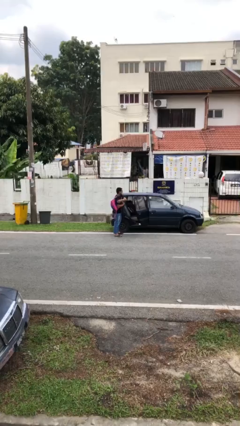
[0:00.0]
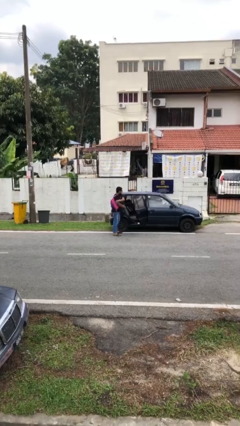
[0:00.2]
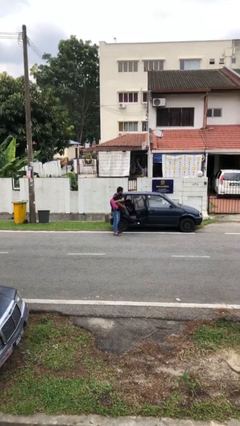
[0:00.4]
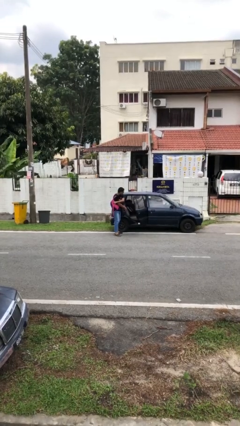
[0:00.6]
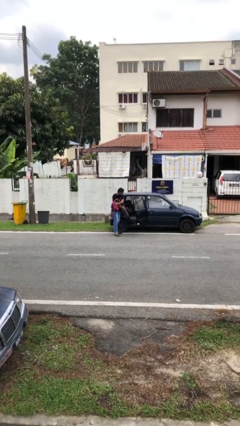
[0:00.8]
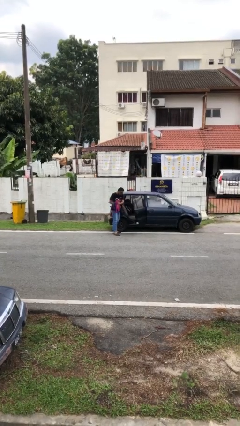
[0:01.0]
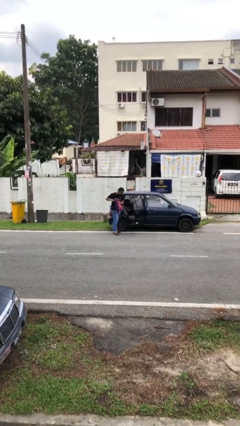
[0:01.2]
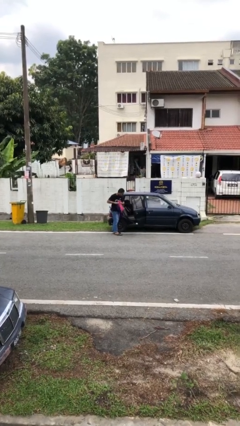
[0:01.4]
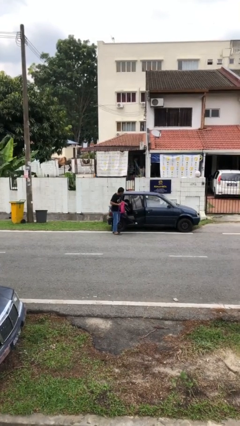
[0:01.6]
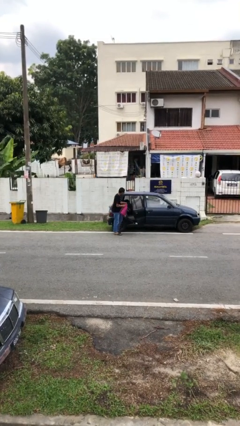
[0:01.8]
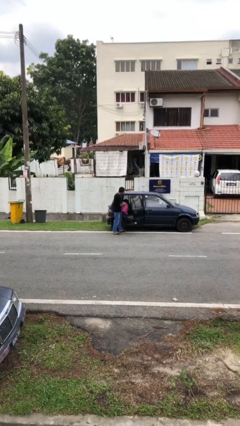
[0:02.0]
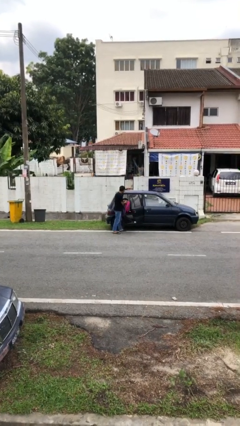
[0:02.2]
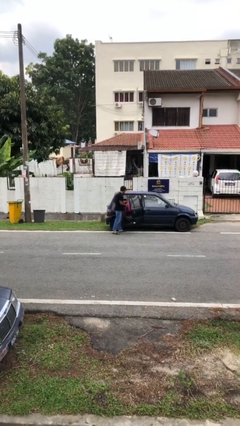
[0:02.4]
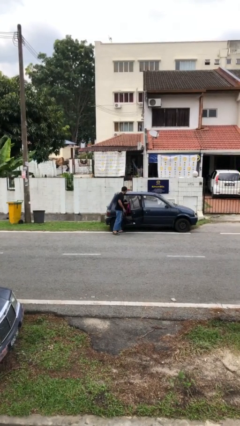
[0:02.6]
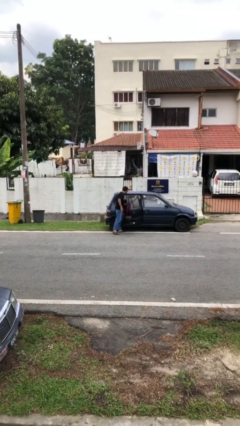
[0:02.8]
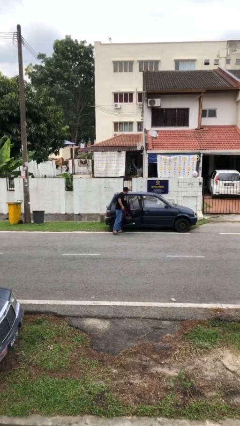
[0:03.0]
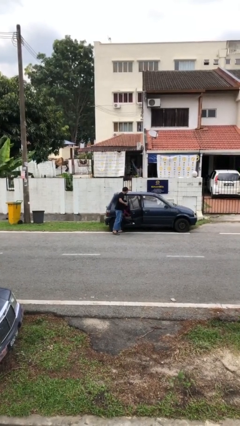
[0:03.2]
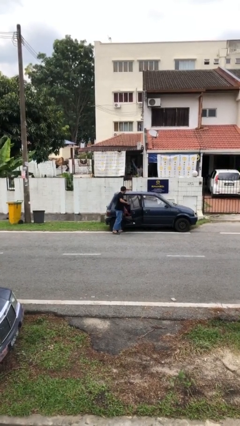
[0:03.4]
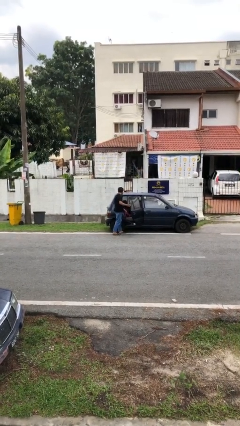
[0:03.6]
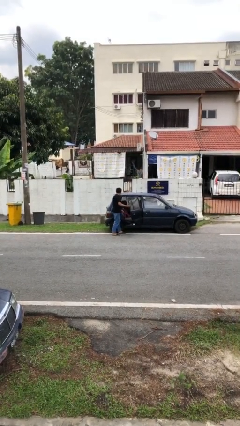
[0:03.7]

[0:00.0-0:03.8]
person loads car

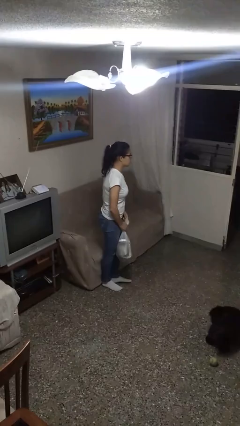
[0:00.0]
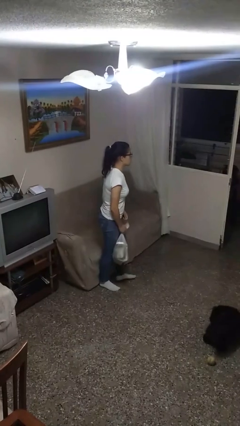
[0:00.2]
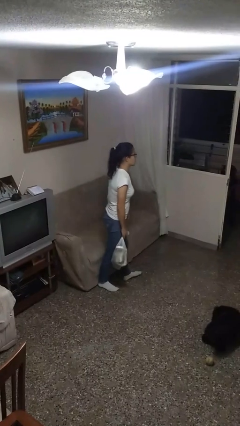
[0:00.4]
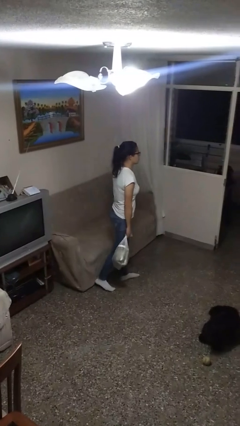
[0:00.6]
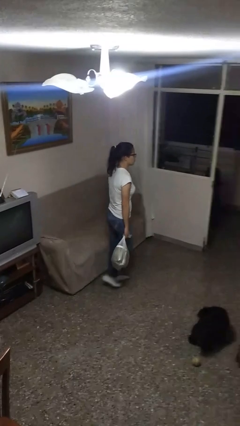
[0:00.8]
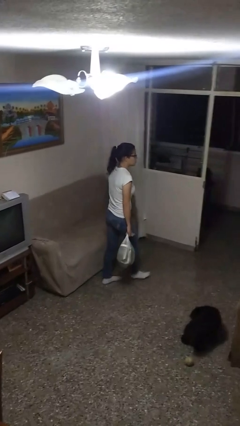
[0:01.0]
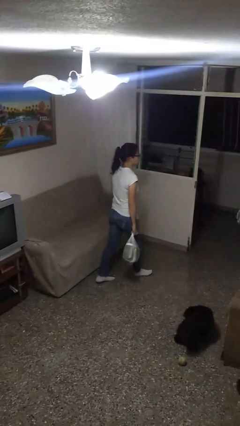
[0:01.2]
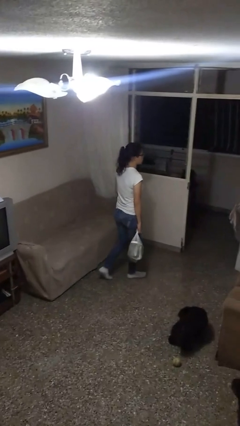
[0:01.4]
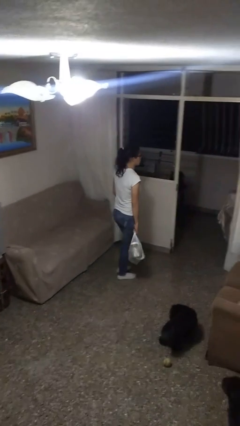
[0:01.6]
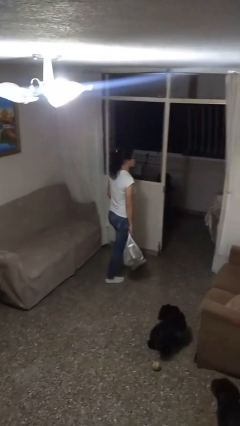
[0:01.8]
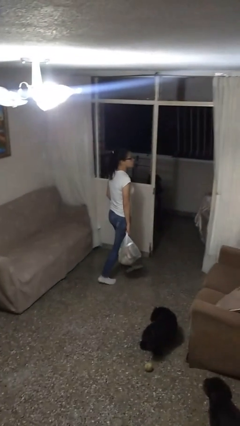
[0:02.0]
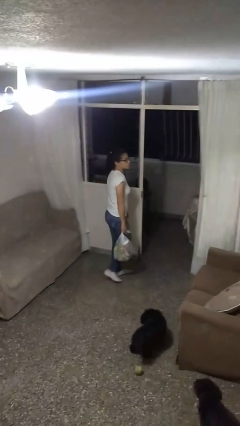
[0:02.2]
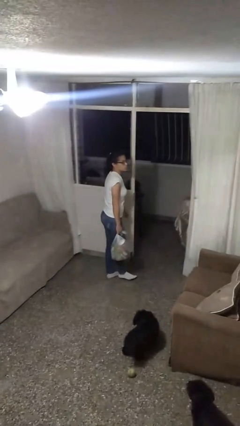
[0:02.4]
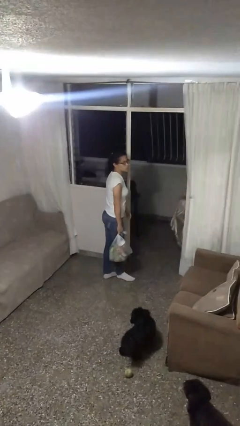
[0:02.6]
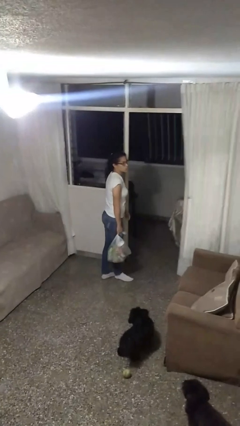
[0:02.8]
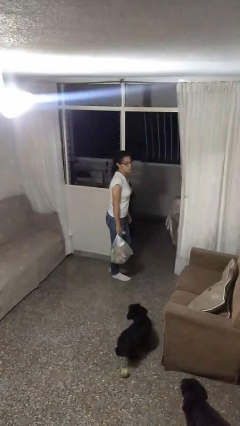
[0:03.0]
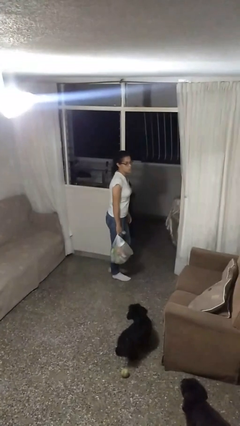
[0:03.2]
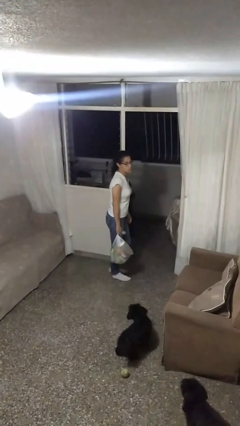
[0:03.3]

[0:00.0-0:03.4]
person carries groceries

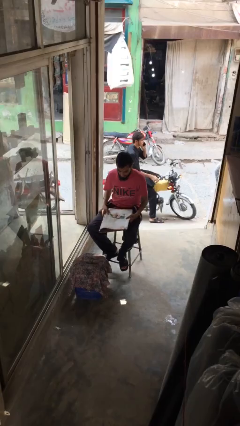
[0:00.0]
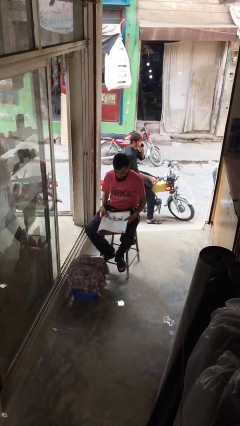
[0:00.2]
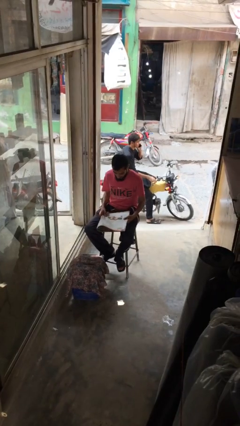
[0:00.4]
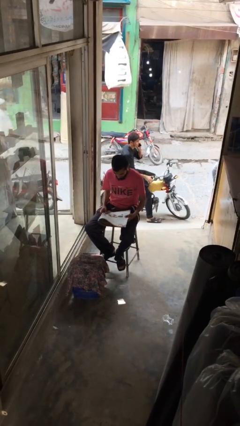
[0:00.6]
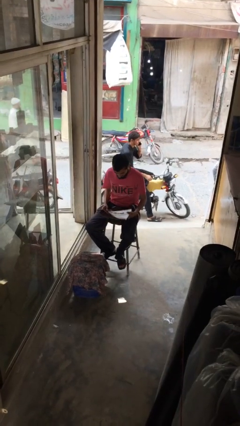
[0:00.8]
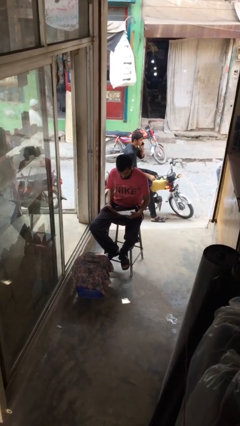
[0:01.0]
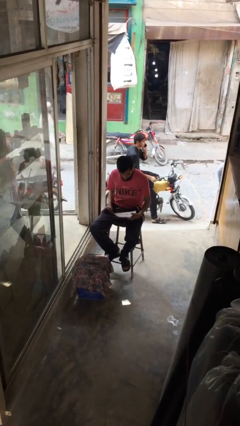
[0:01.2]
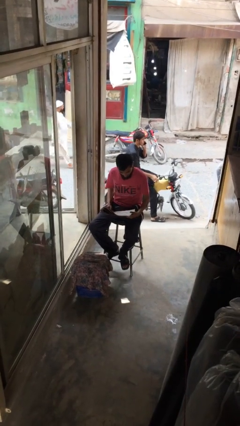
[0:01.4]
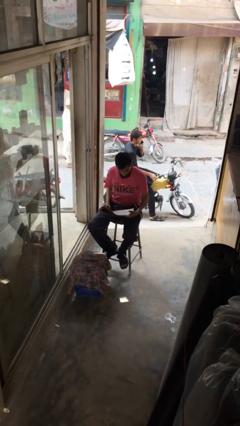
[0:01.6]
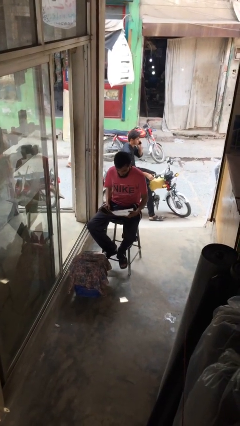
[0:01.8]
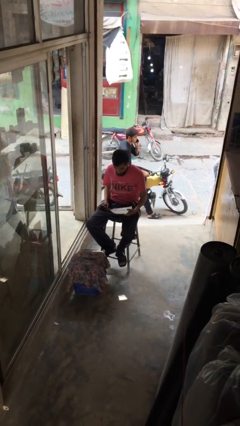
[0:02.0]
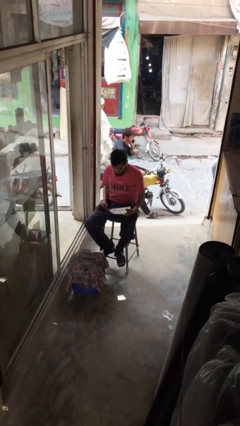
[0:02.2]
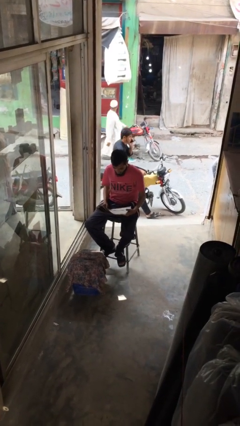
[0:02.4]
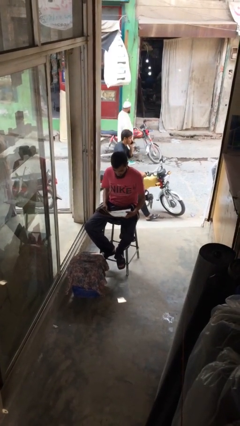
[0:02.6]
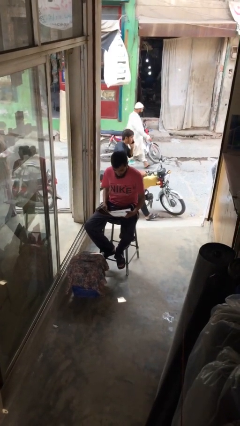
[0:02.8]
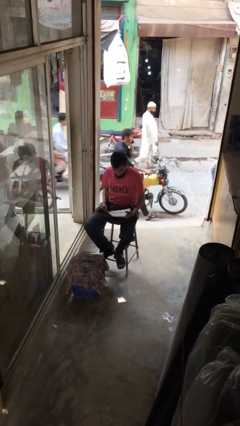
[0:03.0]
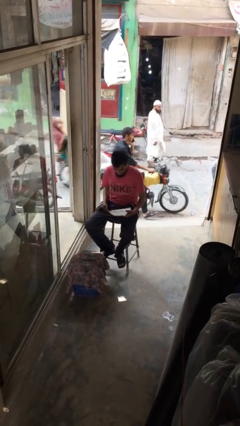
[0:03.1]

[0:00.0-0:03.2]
person reads document

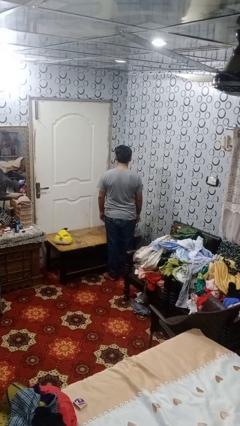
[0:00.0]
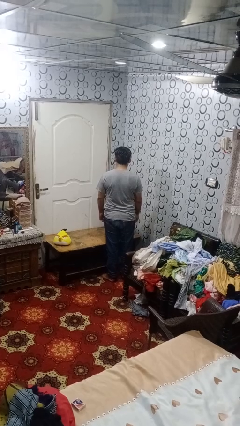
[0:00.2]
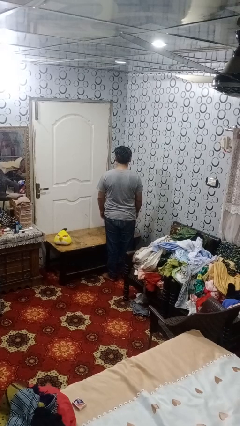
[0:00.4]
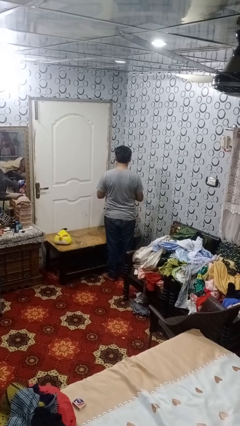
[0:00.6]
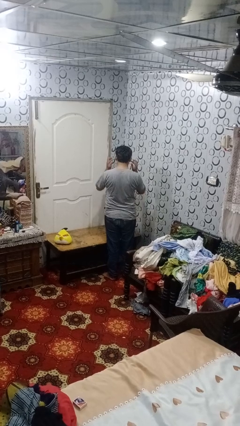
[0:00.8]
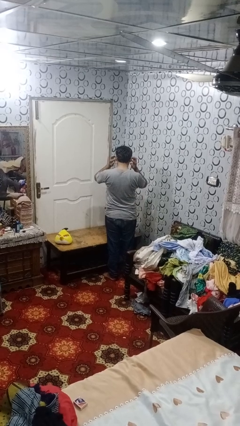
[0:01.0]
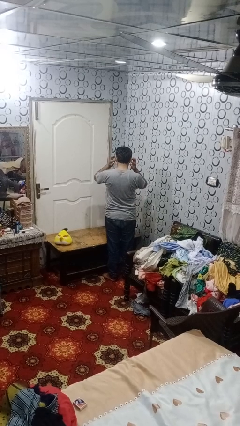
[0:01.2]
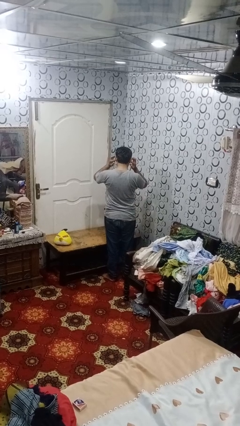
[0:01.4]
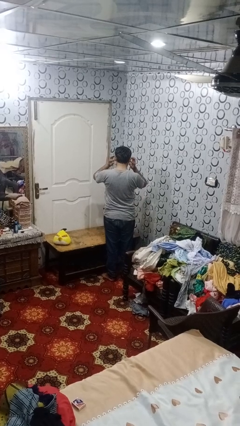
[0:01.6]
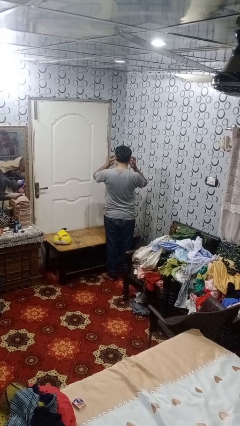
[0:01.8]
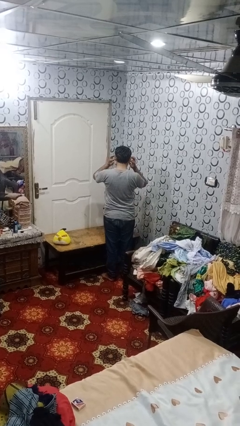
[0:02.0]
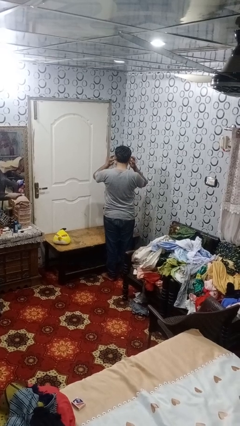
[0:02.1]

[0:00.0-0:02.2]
person puts fingers in ear

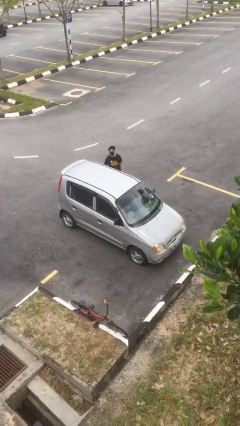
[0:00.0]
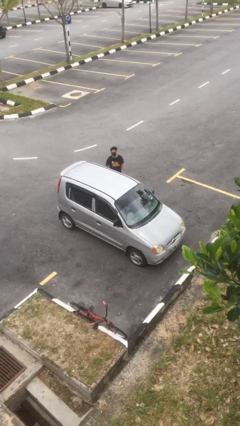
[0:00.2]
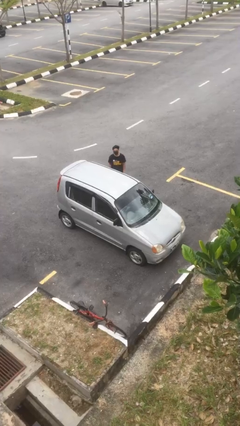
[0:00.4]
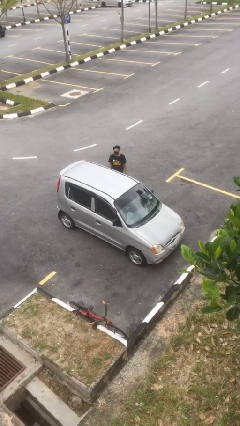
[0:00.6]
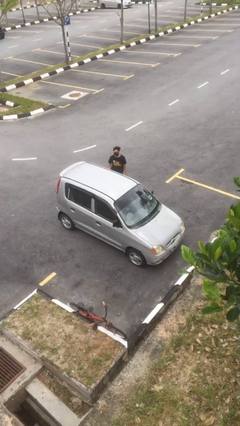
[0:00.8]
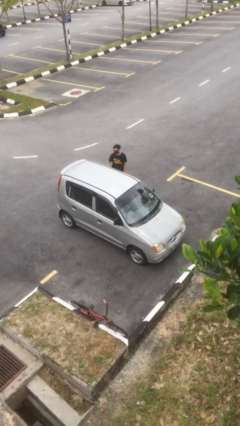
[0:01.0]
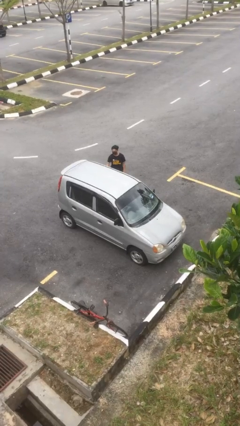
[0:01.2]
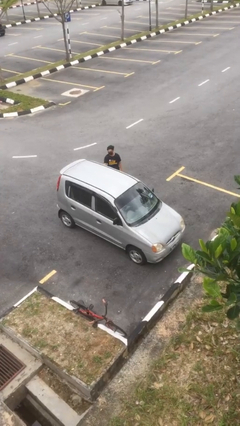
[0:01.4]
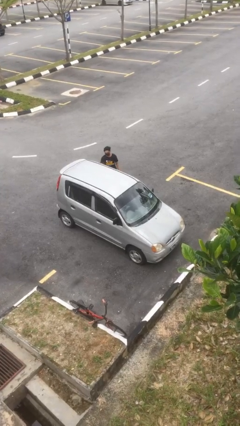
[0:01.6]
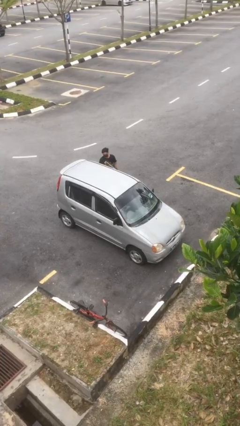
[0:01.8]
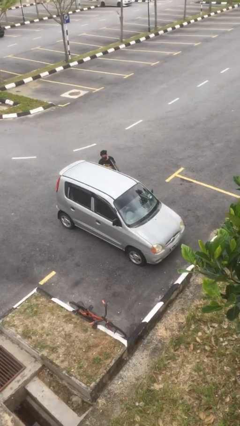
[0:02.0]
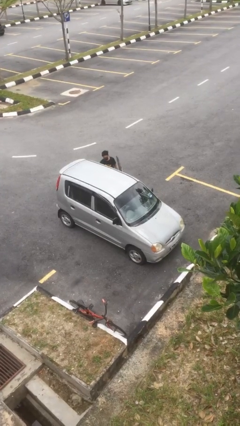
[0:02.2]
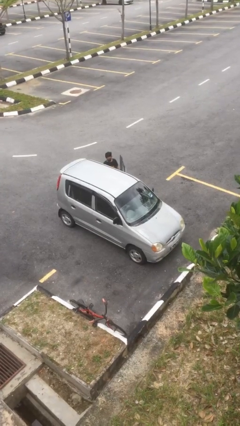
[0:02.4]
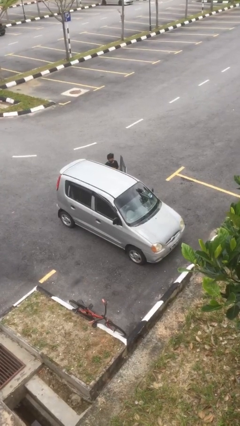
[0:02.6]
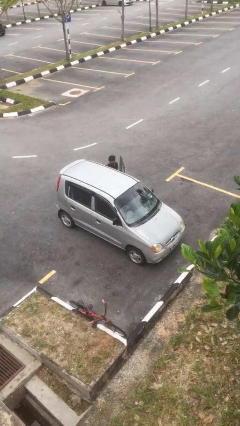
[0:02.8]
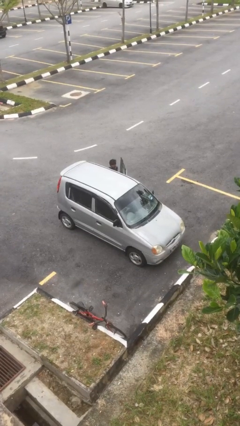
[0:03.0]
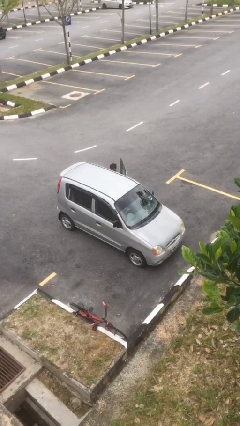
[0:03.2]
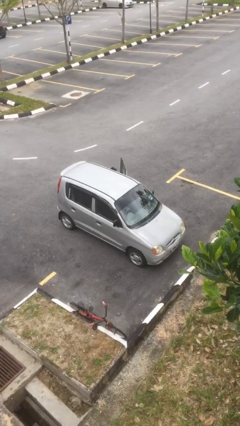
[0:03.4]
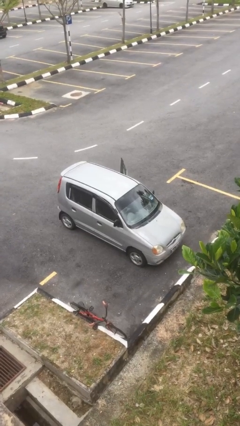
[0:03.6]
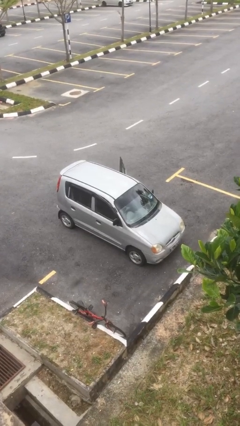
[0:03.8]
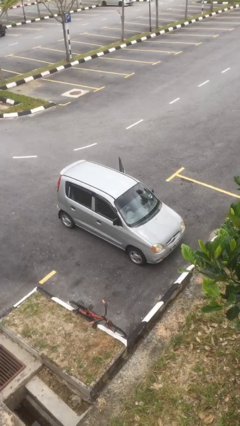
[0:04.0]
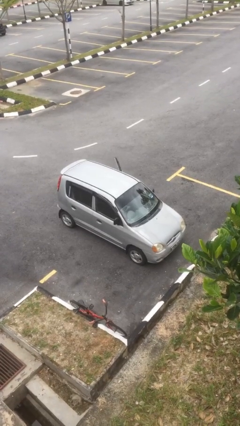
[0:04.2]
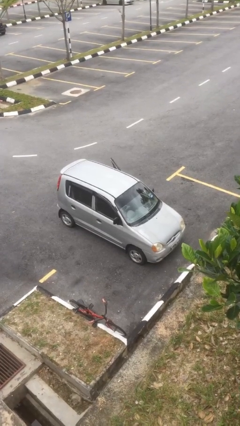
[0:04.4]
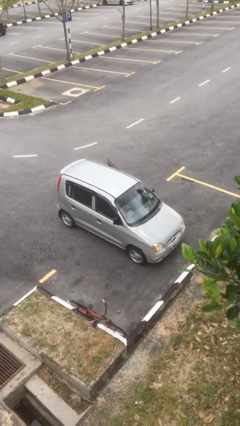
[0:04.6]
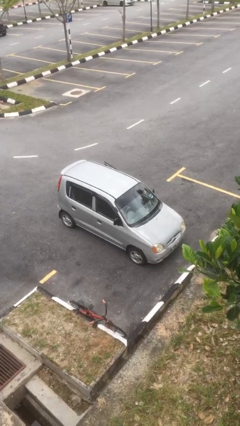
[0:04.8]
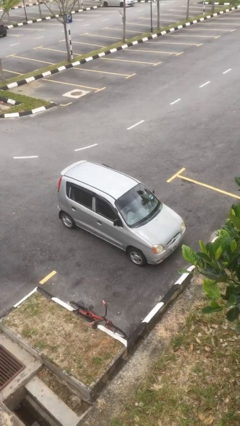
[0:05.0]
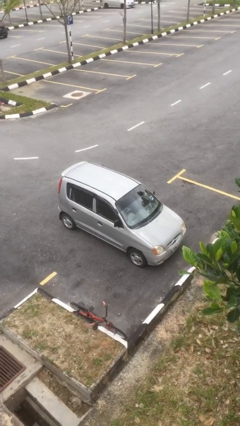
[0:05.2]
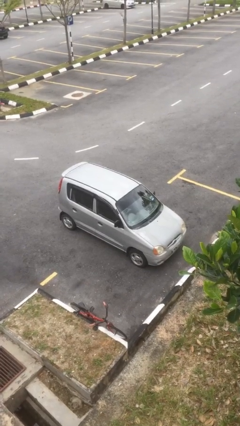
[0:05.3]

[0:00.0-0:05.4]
car picks up person
